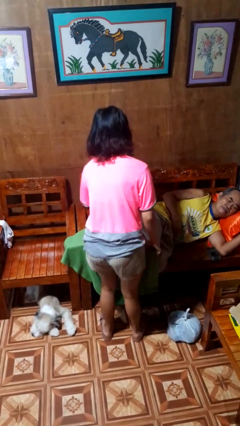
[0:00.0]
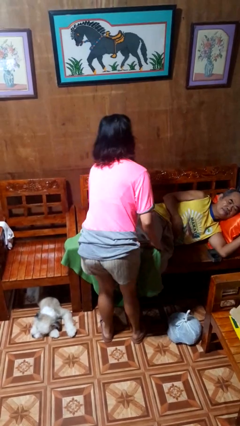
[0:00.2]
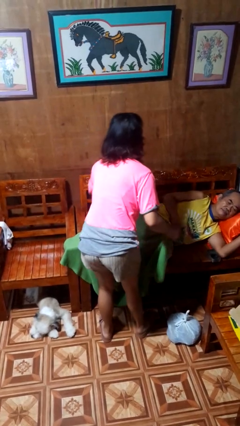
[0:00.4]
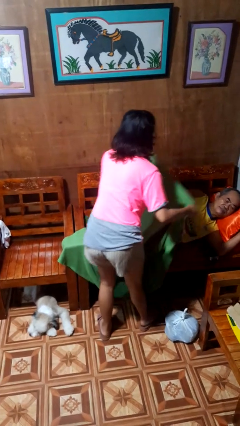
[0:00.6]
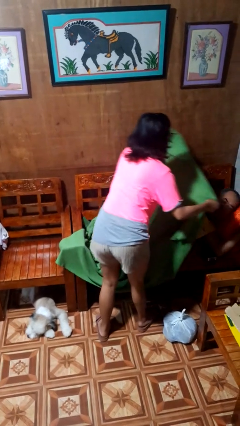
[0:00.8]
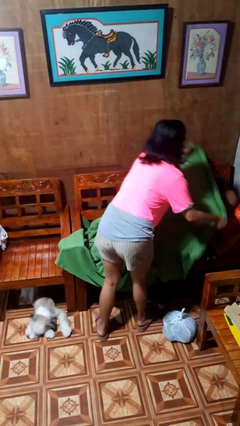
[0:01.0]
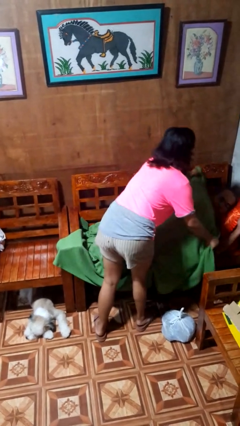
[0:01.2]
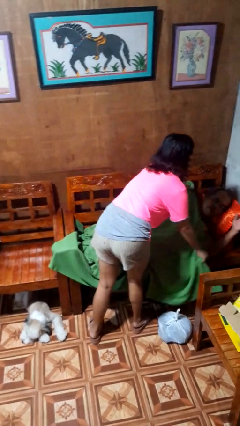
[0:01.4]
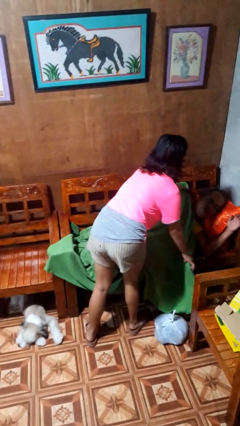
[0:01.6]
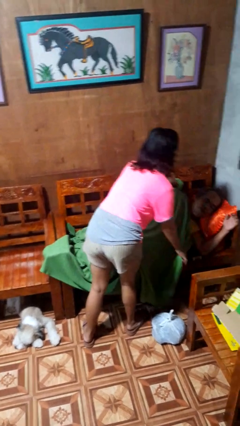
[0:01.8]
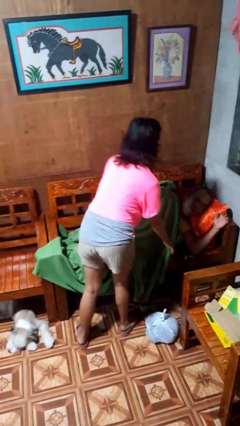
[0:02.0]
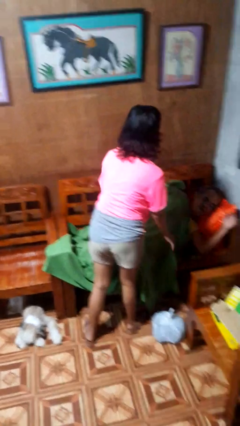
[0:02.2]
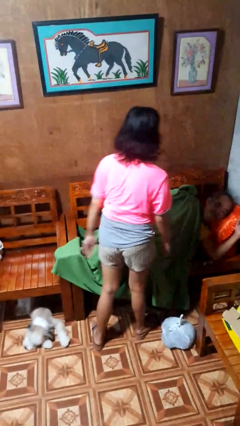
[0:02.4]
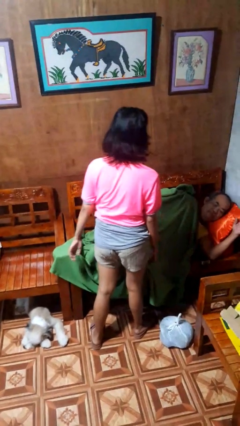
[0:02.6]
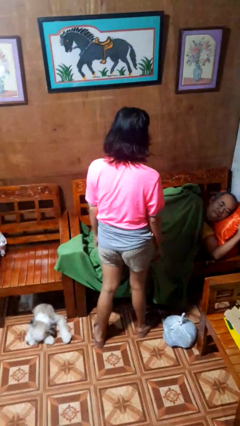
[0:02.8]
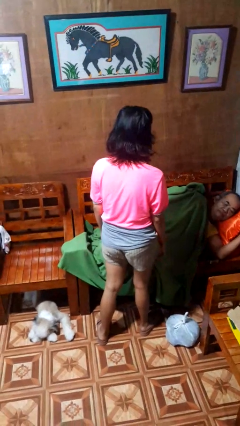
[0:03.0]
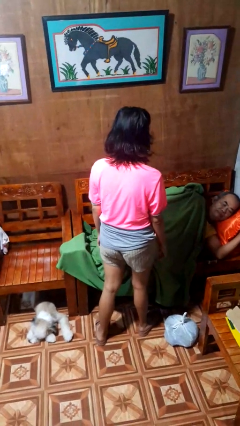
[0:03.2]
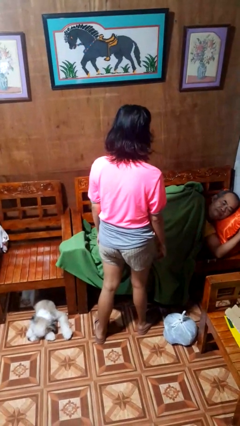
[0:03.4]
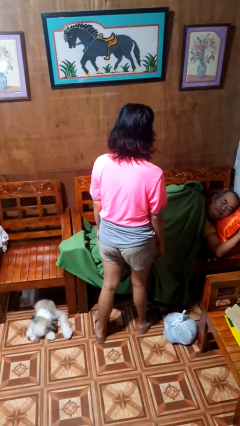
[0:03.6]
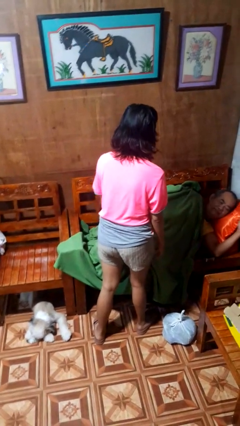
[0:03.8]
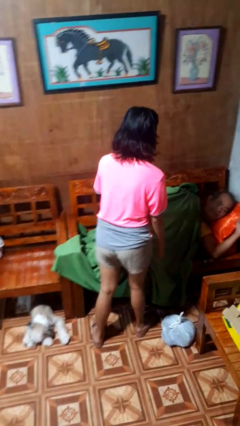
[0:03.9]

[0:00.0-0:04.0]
person covers friend with blanket

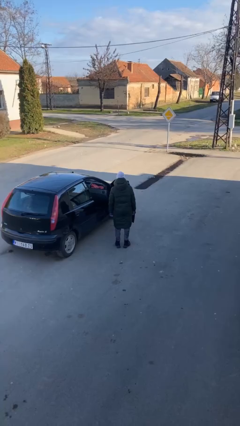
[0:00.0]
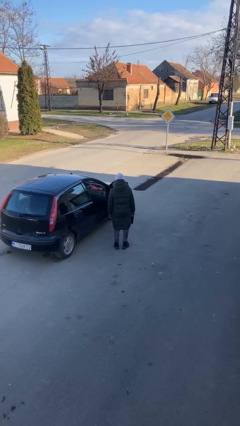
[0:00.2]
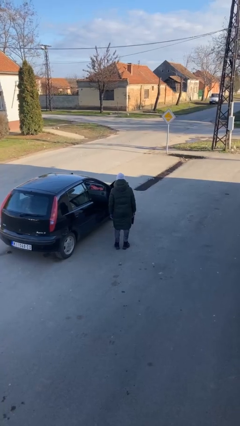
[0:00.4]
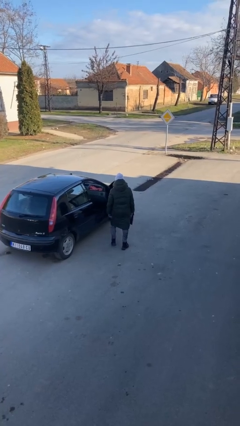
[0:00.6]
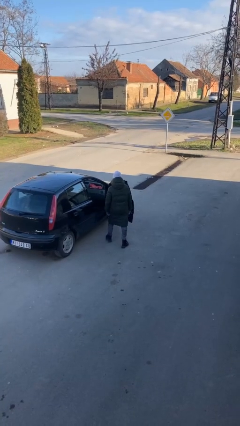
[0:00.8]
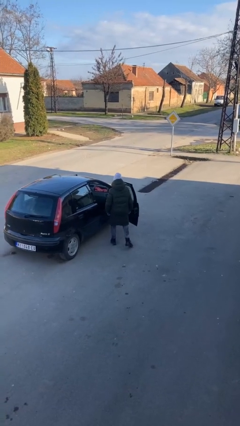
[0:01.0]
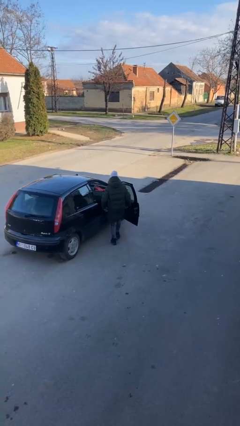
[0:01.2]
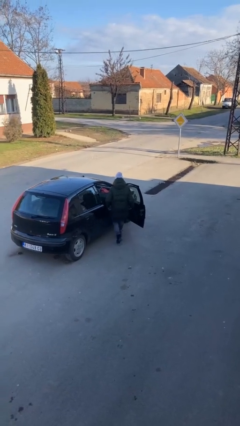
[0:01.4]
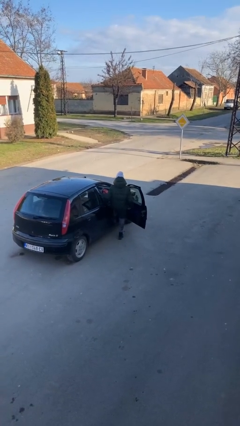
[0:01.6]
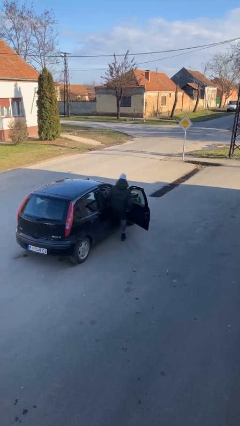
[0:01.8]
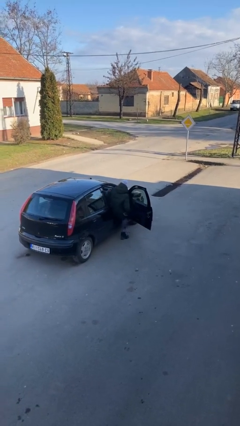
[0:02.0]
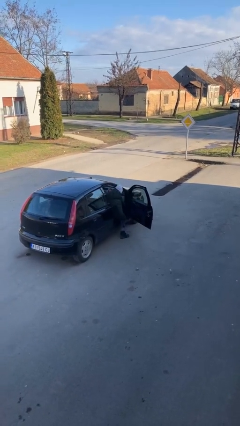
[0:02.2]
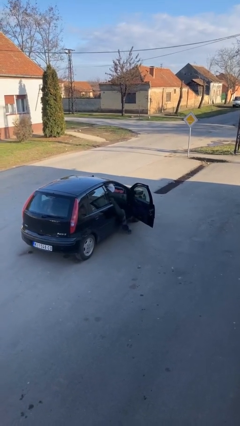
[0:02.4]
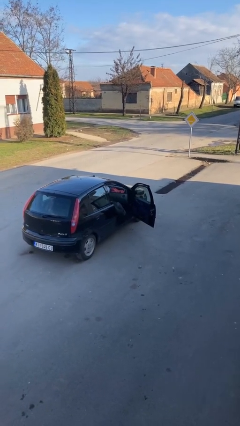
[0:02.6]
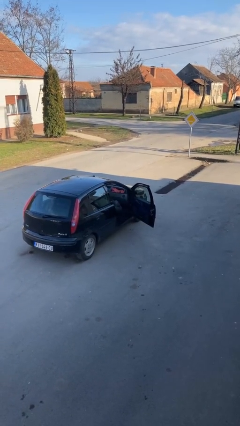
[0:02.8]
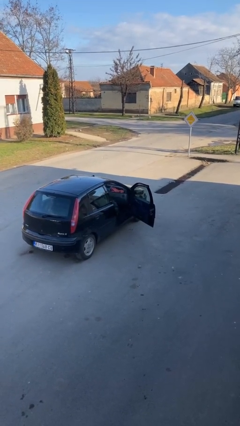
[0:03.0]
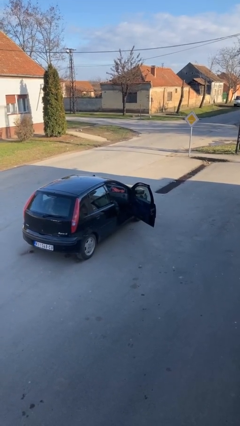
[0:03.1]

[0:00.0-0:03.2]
person enters car

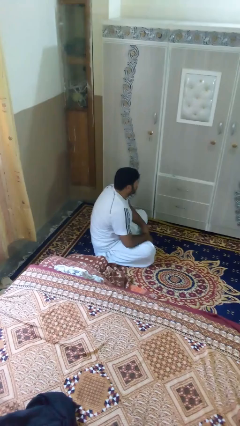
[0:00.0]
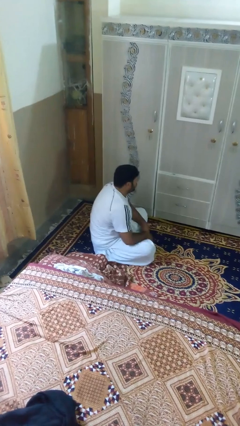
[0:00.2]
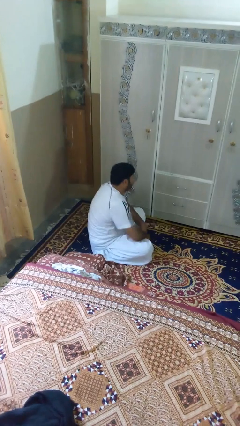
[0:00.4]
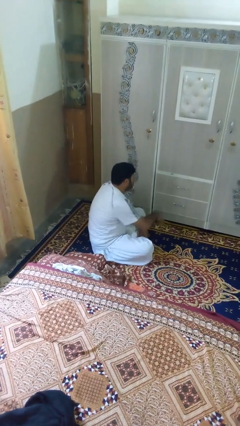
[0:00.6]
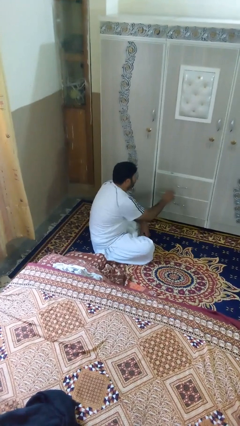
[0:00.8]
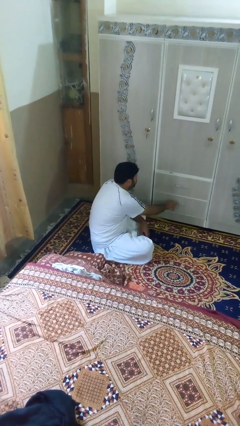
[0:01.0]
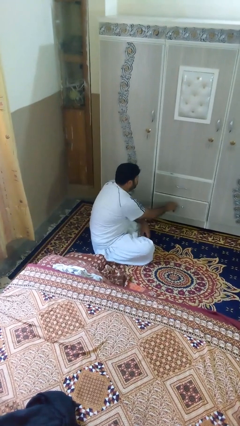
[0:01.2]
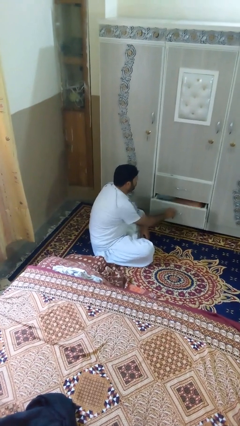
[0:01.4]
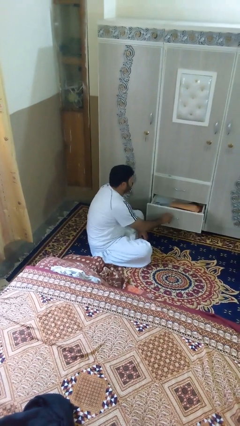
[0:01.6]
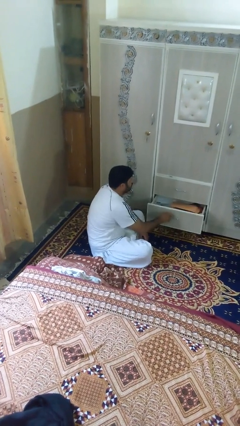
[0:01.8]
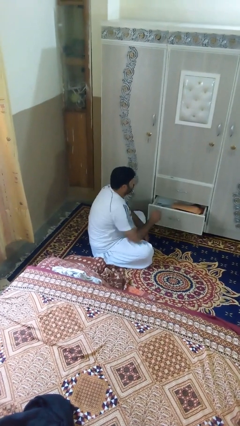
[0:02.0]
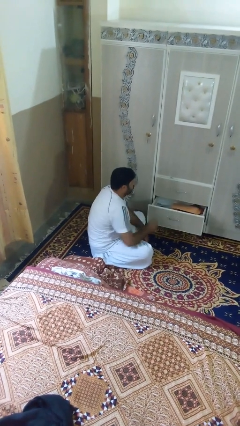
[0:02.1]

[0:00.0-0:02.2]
person opens dresser drawer

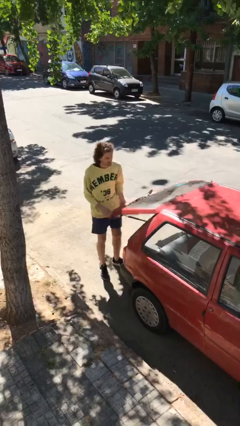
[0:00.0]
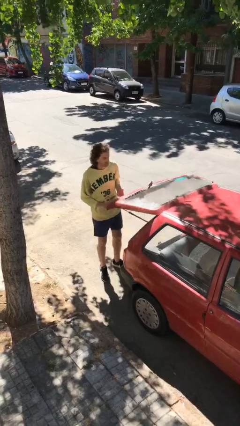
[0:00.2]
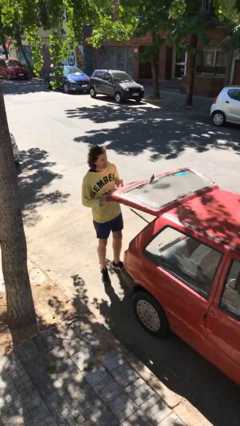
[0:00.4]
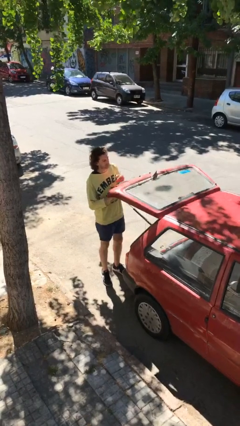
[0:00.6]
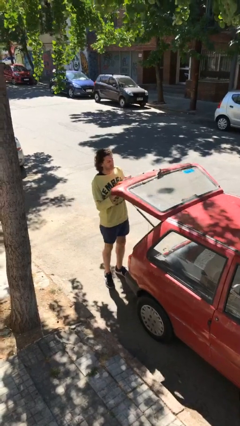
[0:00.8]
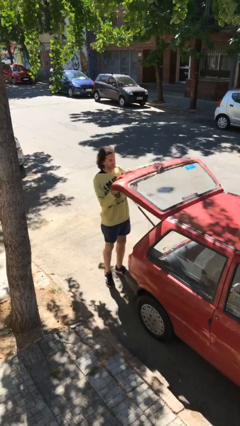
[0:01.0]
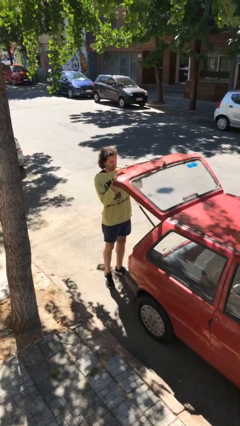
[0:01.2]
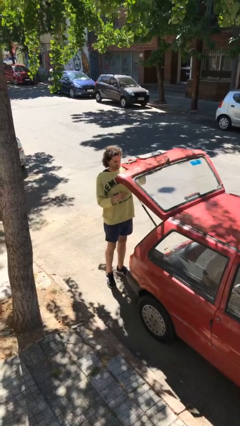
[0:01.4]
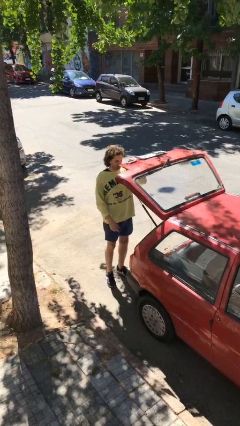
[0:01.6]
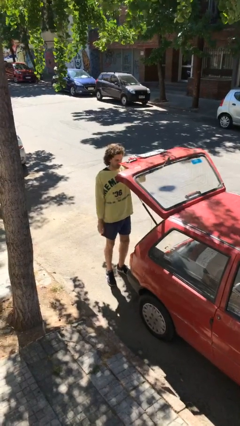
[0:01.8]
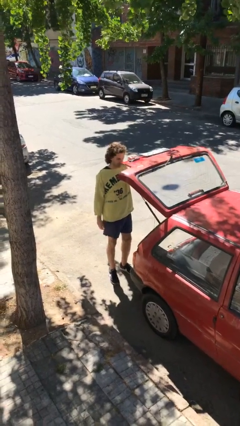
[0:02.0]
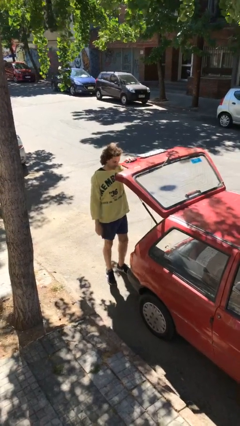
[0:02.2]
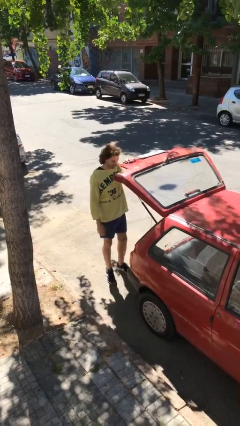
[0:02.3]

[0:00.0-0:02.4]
person opens car trunk

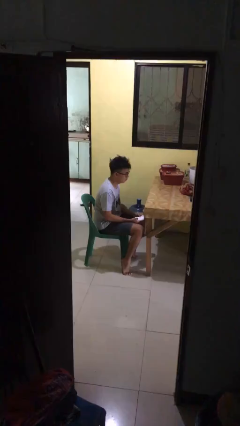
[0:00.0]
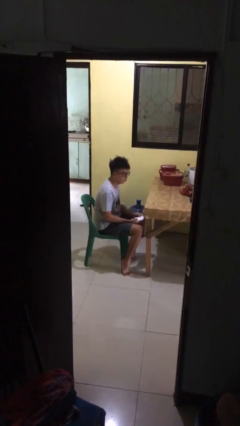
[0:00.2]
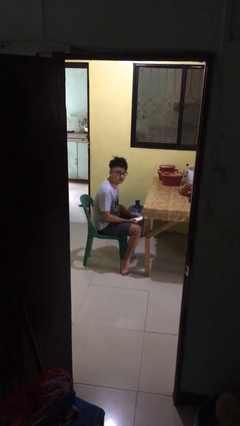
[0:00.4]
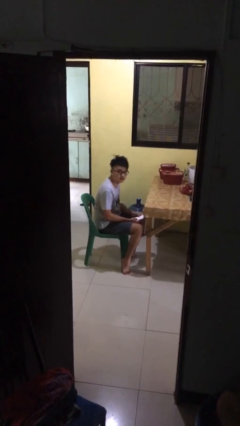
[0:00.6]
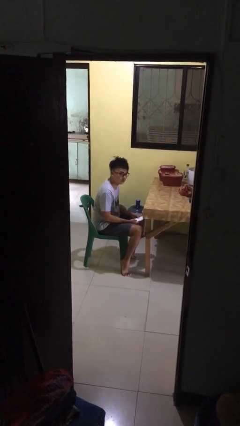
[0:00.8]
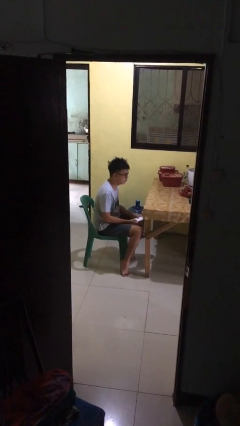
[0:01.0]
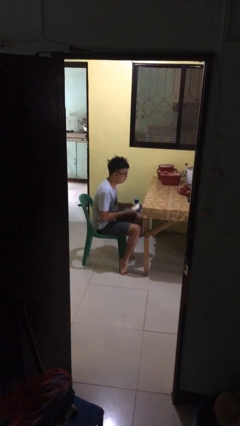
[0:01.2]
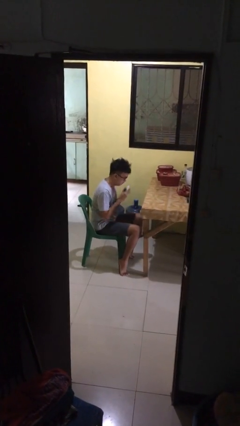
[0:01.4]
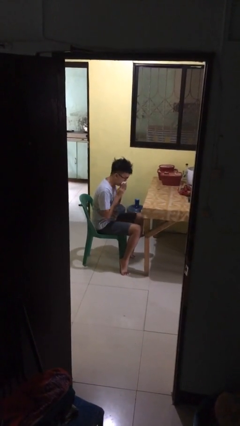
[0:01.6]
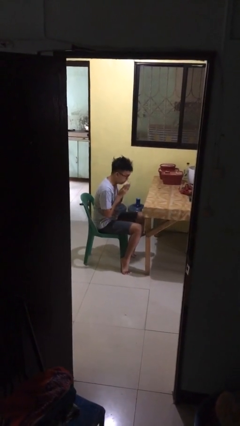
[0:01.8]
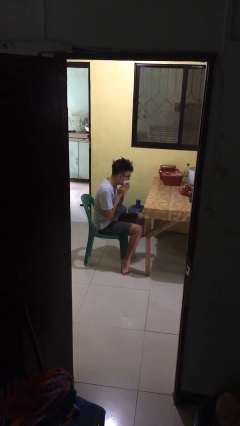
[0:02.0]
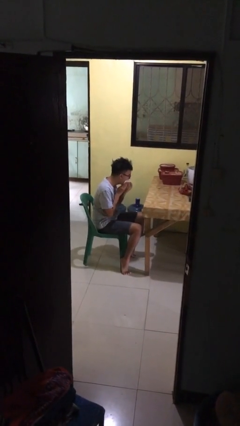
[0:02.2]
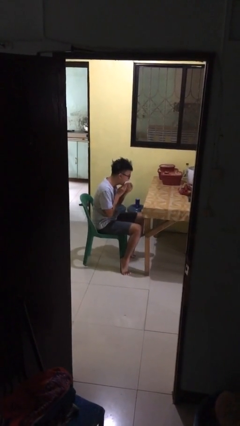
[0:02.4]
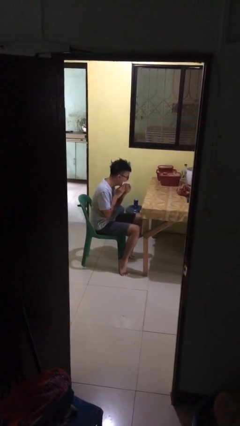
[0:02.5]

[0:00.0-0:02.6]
person wipes mouth with napkin

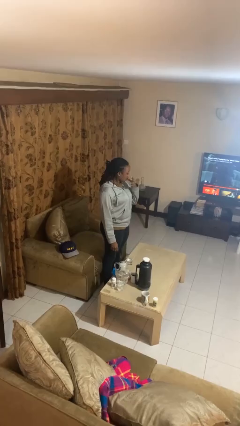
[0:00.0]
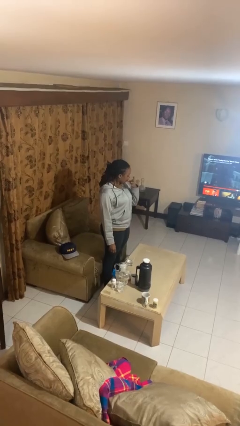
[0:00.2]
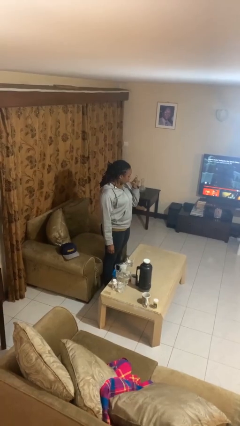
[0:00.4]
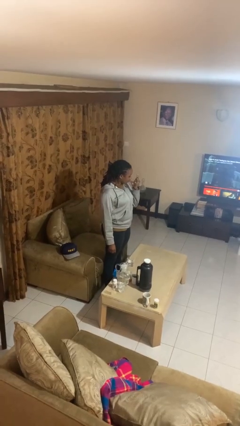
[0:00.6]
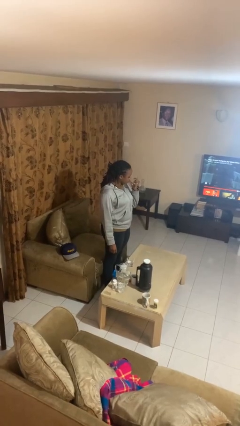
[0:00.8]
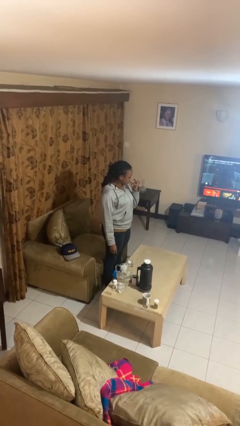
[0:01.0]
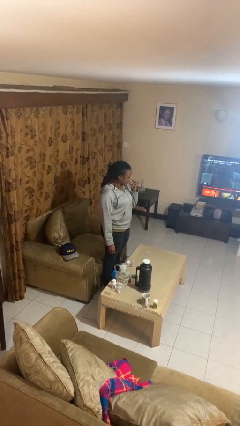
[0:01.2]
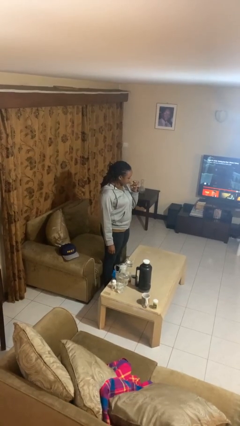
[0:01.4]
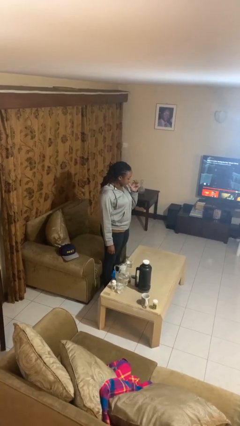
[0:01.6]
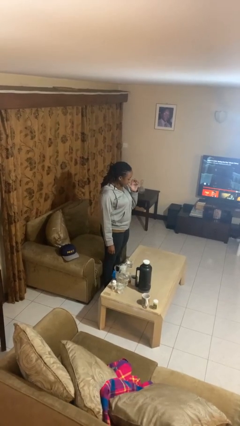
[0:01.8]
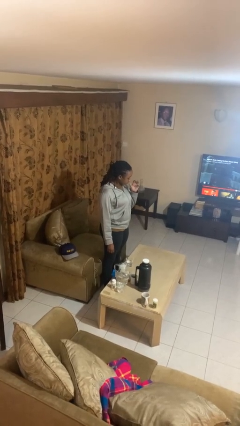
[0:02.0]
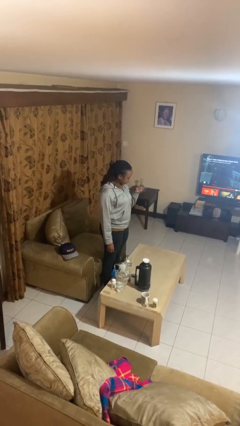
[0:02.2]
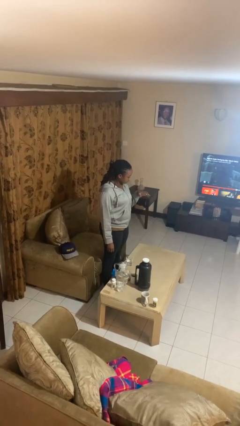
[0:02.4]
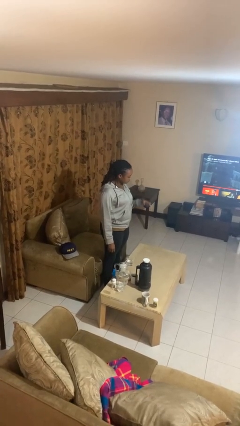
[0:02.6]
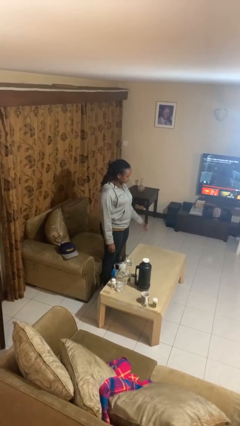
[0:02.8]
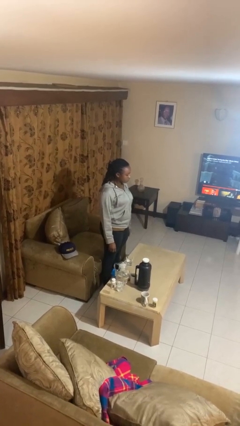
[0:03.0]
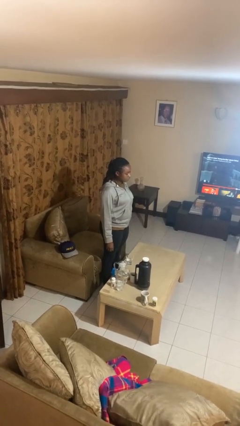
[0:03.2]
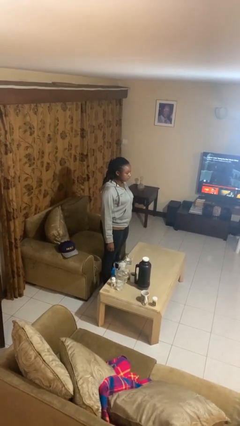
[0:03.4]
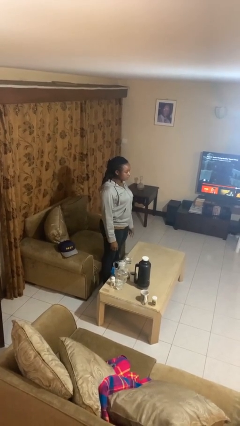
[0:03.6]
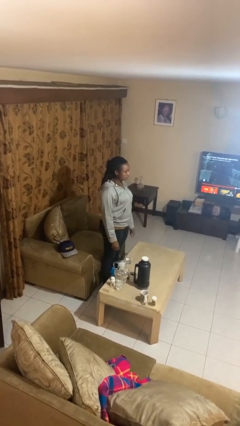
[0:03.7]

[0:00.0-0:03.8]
person licks fingers
